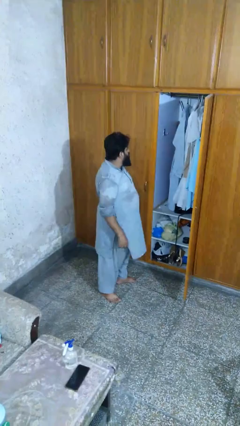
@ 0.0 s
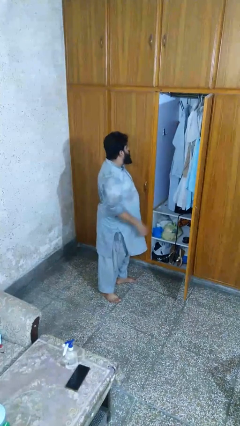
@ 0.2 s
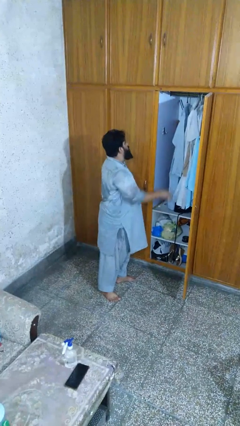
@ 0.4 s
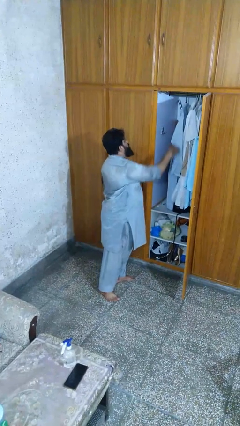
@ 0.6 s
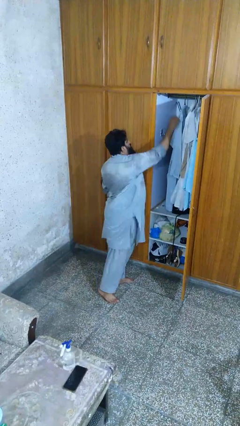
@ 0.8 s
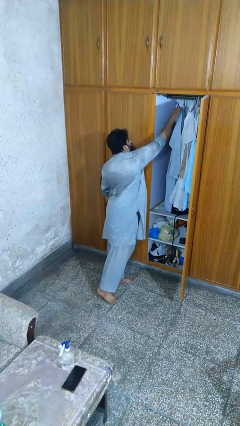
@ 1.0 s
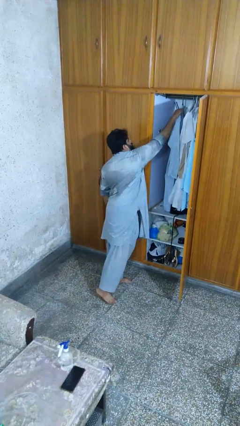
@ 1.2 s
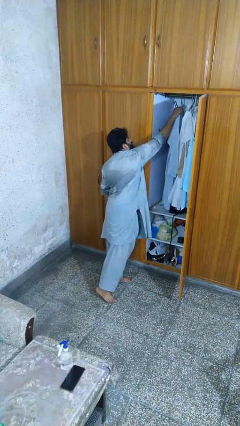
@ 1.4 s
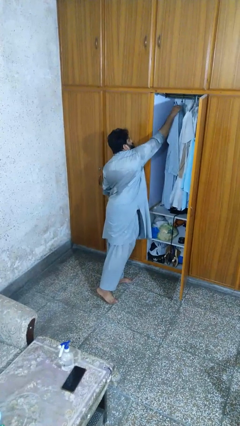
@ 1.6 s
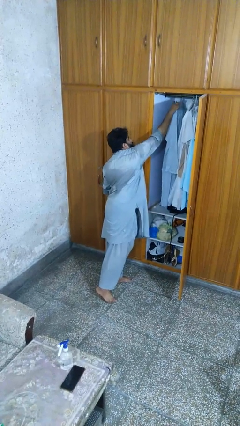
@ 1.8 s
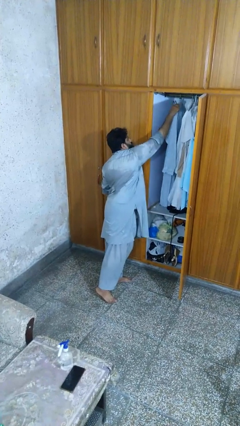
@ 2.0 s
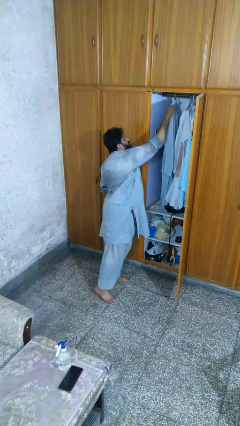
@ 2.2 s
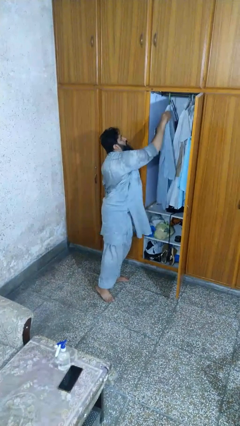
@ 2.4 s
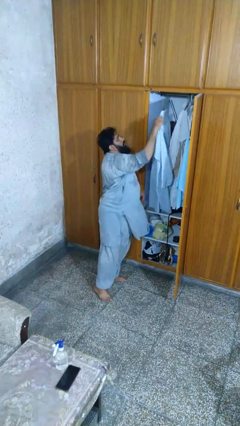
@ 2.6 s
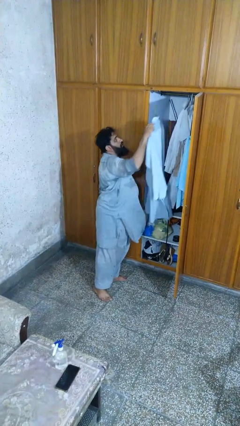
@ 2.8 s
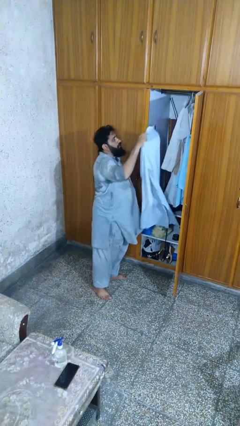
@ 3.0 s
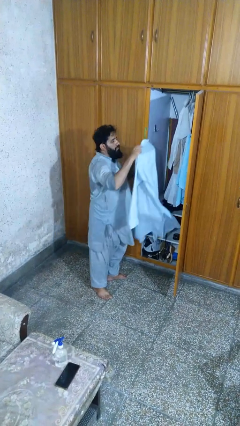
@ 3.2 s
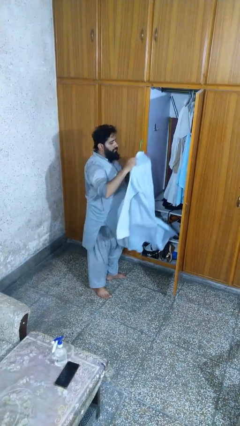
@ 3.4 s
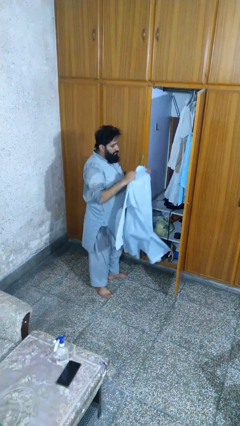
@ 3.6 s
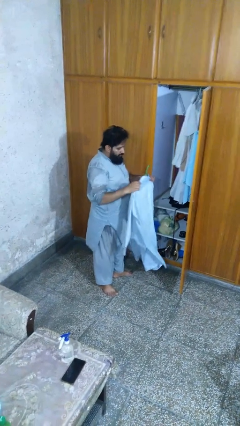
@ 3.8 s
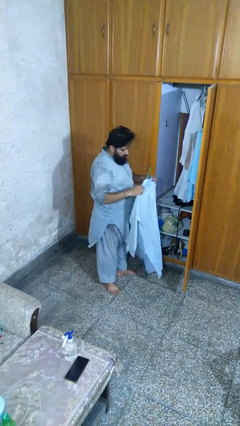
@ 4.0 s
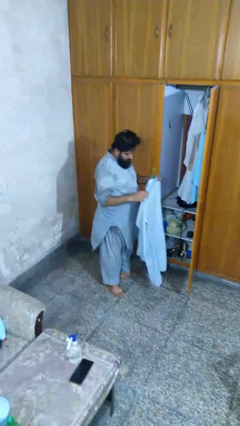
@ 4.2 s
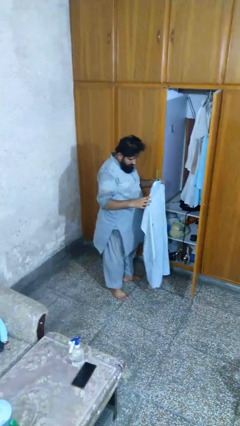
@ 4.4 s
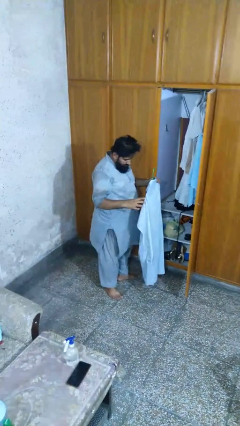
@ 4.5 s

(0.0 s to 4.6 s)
person takes clothes from closet

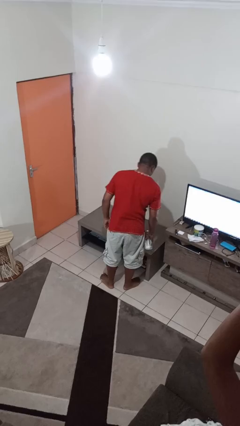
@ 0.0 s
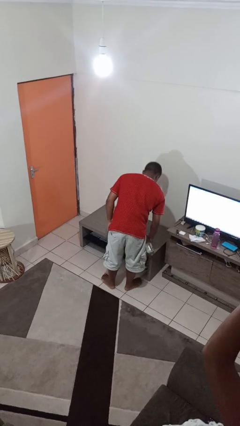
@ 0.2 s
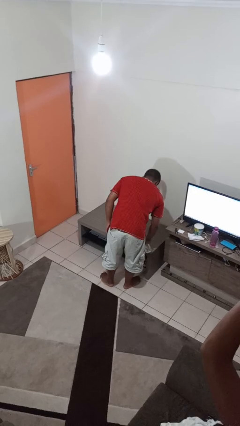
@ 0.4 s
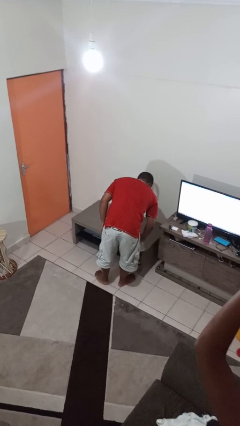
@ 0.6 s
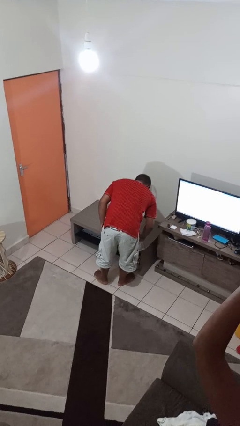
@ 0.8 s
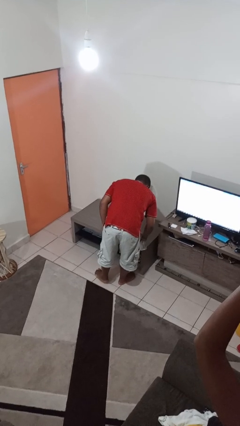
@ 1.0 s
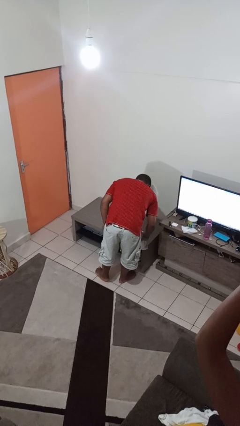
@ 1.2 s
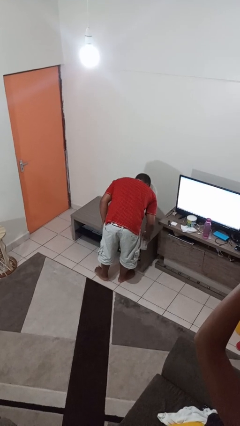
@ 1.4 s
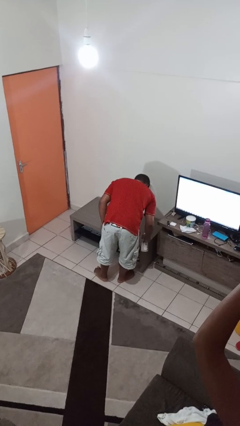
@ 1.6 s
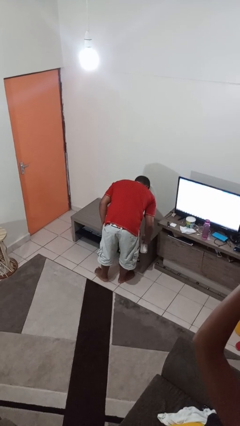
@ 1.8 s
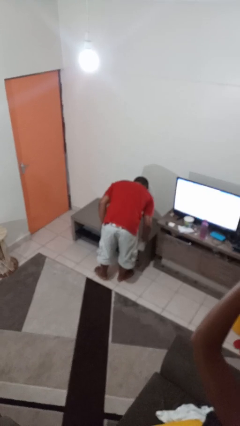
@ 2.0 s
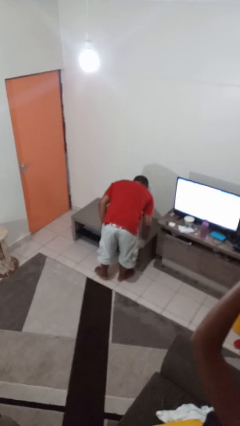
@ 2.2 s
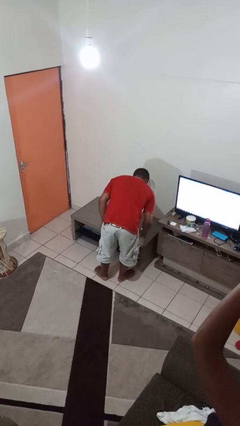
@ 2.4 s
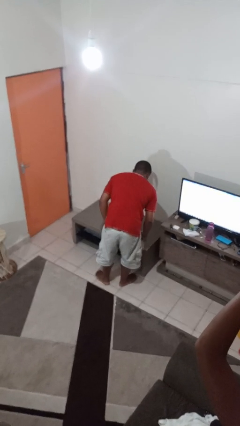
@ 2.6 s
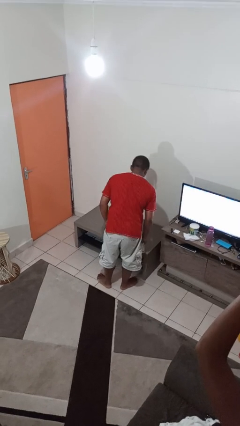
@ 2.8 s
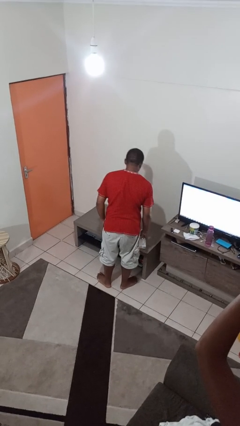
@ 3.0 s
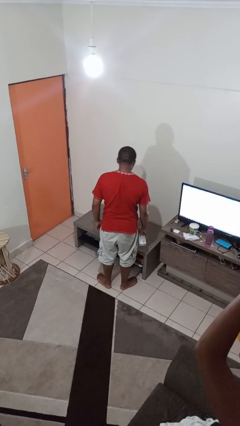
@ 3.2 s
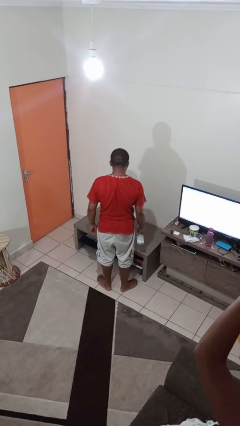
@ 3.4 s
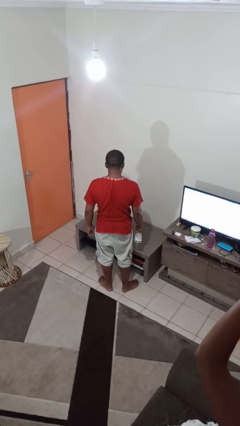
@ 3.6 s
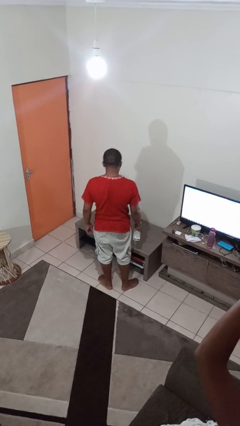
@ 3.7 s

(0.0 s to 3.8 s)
person sprays from bottle

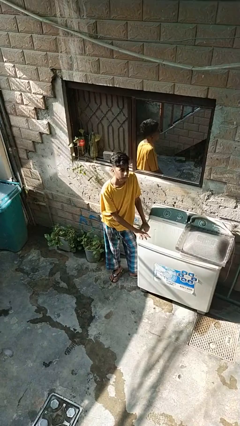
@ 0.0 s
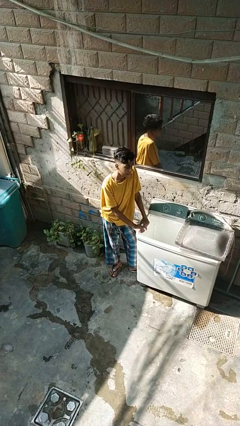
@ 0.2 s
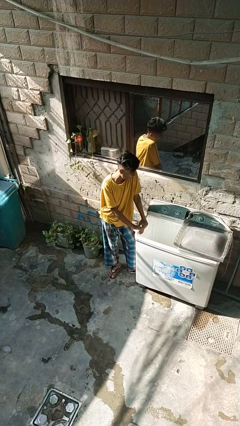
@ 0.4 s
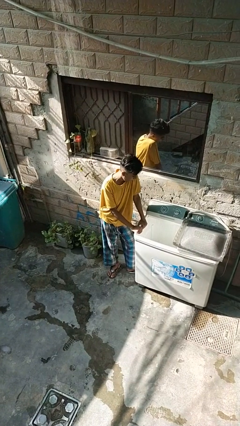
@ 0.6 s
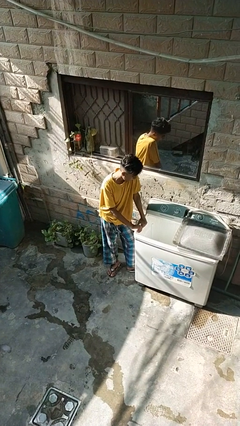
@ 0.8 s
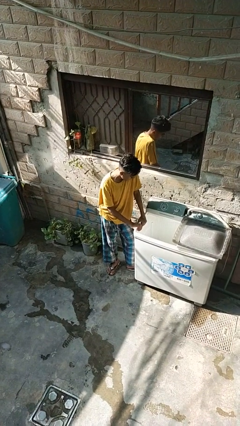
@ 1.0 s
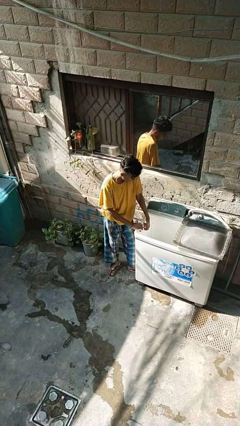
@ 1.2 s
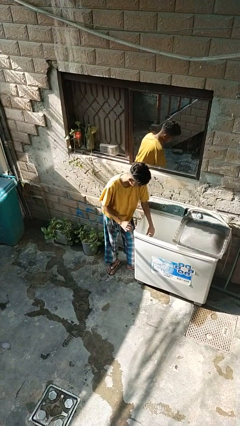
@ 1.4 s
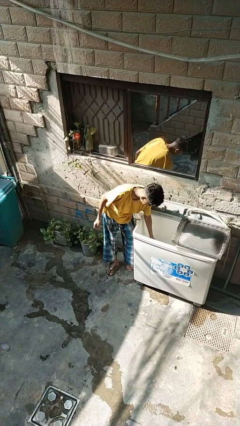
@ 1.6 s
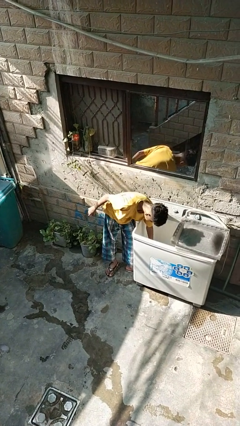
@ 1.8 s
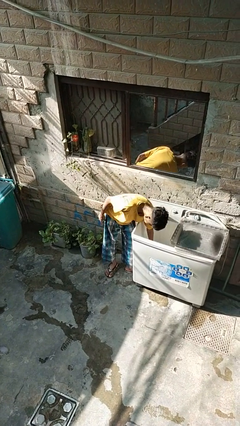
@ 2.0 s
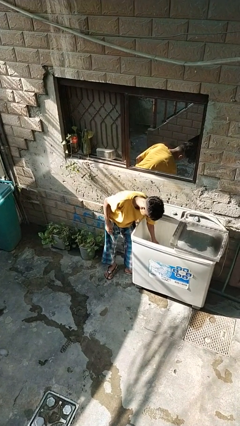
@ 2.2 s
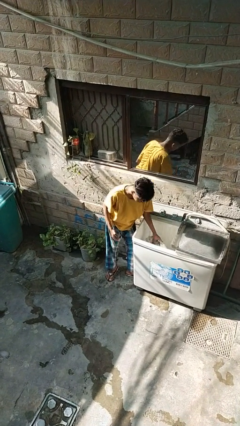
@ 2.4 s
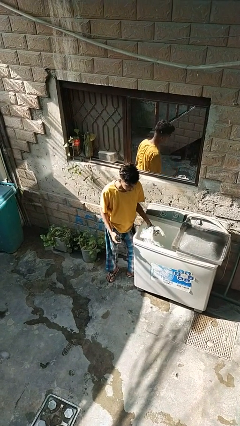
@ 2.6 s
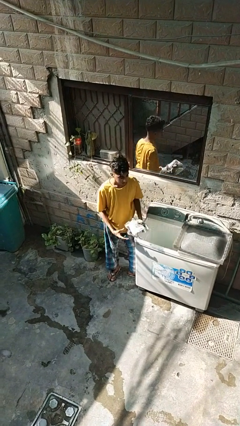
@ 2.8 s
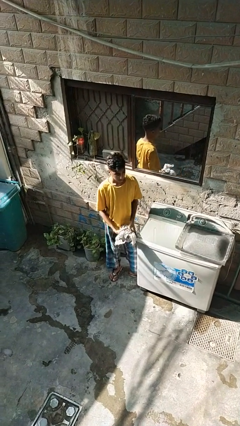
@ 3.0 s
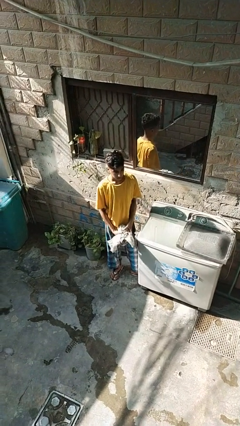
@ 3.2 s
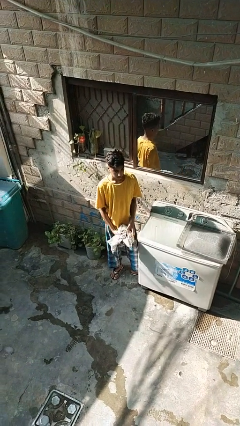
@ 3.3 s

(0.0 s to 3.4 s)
person unloads clotheswasher

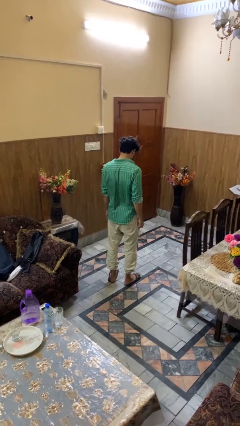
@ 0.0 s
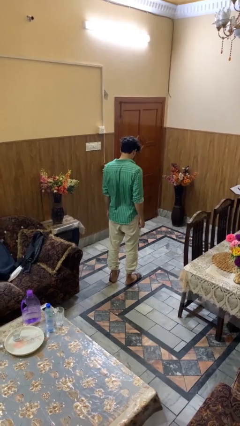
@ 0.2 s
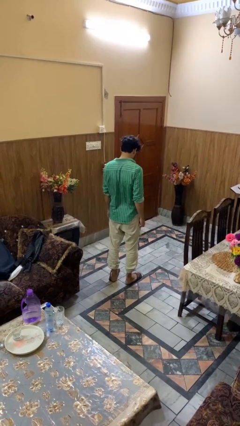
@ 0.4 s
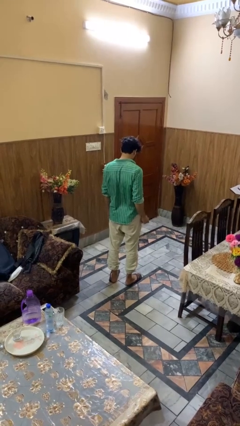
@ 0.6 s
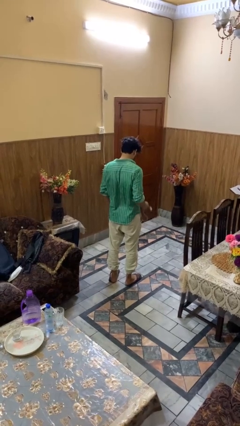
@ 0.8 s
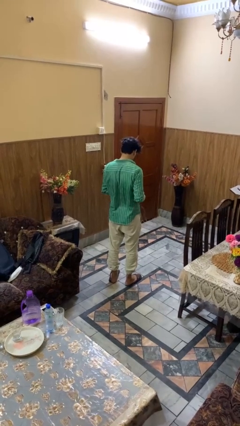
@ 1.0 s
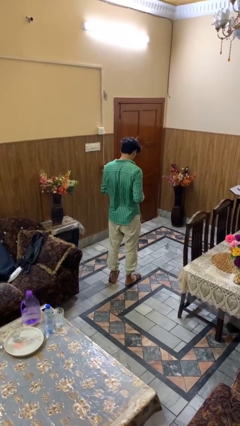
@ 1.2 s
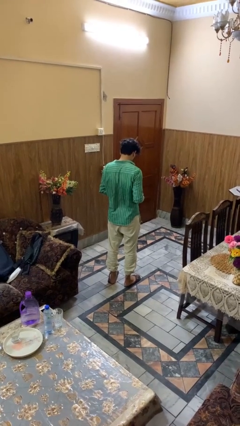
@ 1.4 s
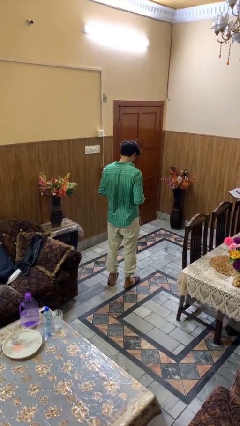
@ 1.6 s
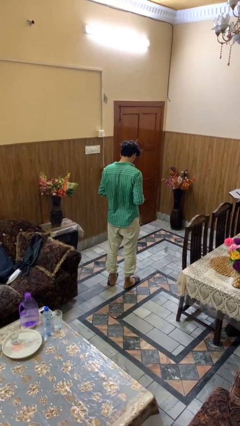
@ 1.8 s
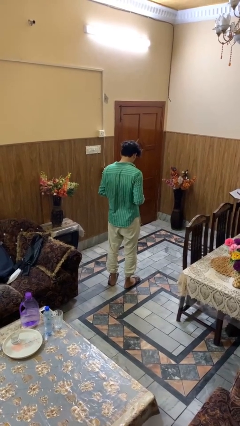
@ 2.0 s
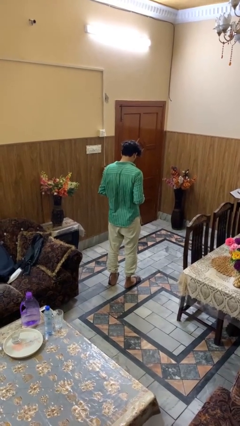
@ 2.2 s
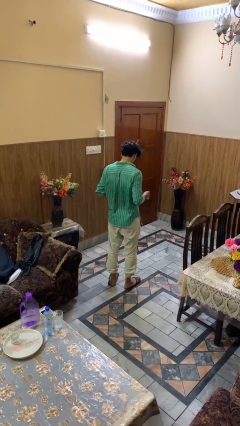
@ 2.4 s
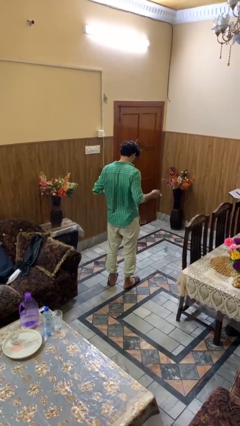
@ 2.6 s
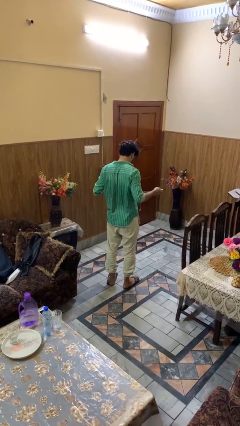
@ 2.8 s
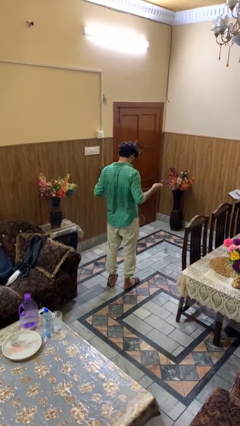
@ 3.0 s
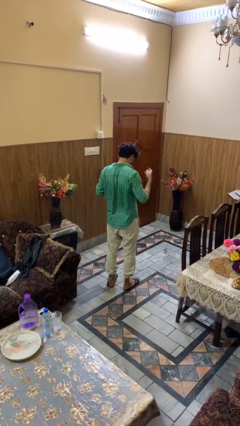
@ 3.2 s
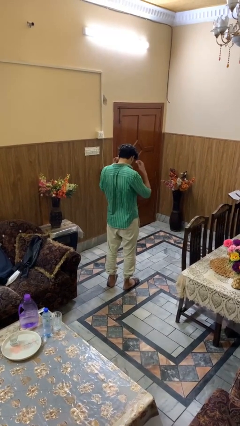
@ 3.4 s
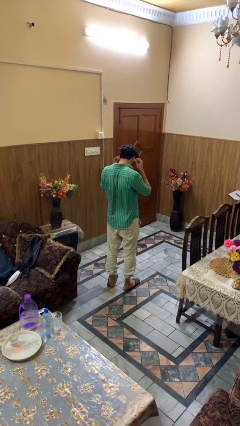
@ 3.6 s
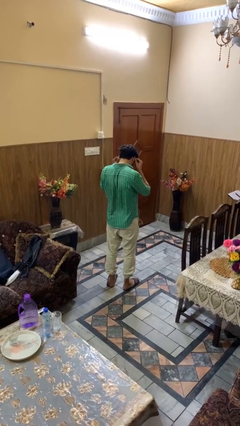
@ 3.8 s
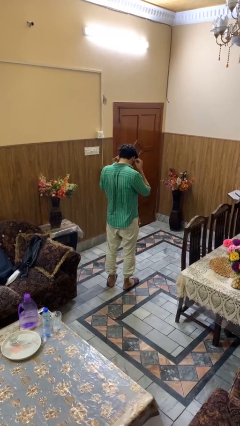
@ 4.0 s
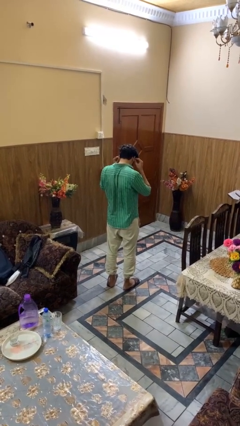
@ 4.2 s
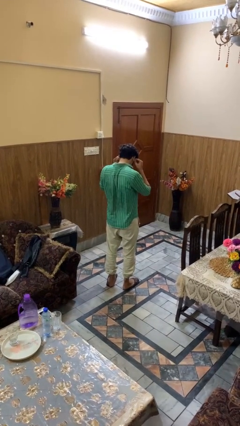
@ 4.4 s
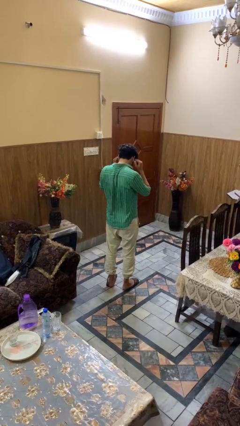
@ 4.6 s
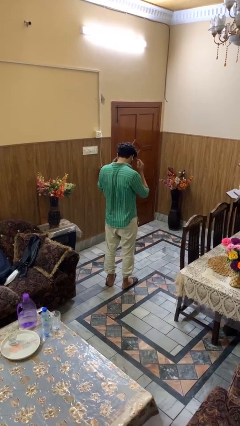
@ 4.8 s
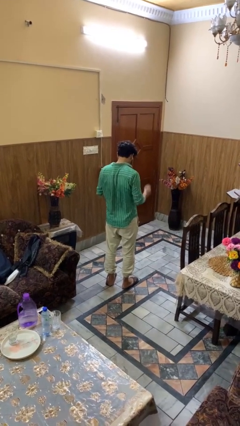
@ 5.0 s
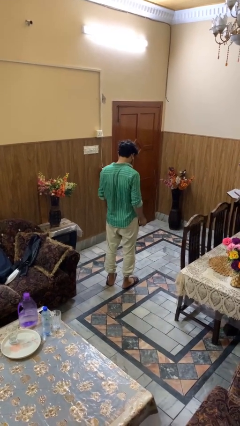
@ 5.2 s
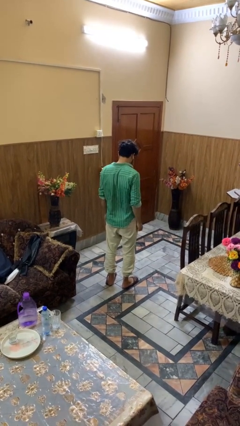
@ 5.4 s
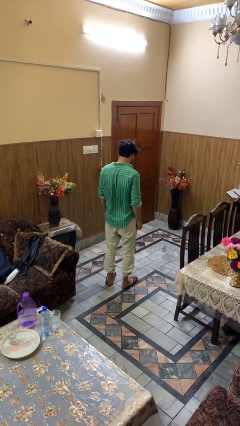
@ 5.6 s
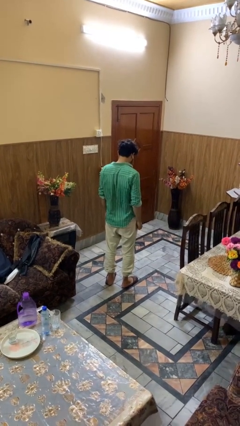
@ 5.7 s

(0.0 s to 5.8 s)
person puts on headphones
